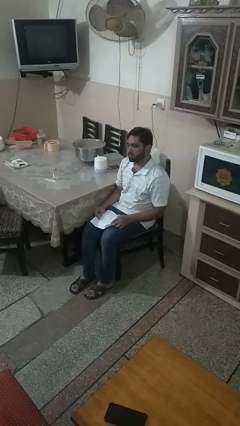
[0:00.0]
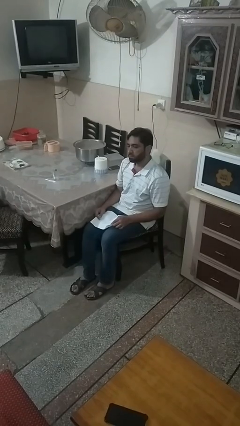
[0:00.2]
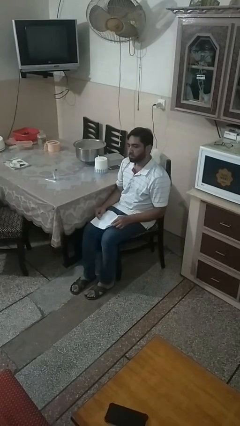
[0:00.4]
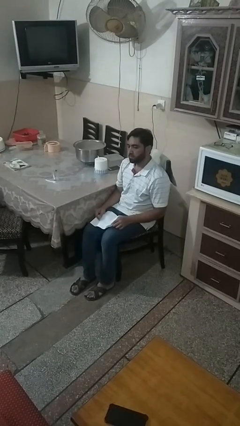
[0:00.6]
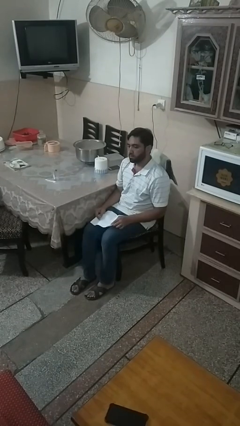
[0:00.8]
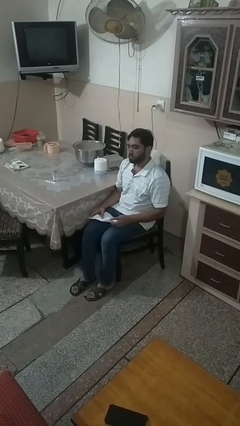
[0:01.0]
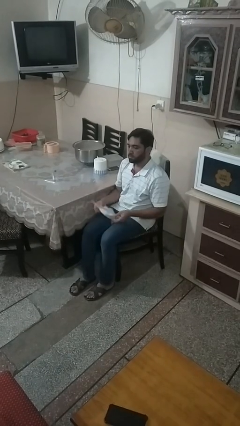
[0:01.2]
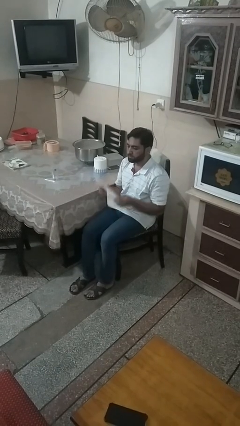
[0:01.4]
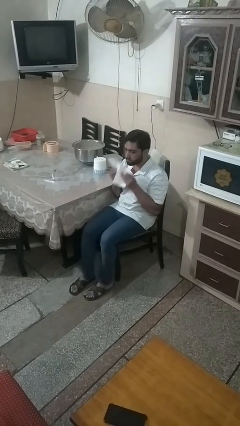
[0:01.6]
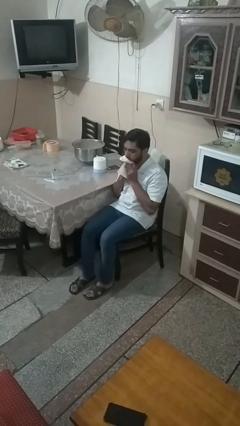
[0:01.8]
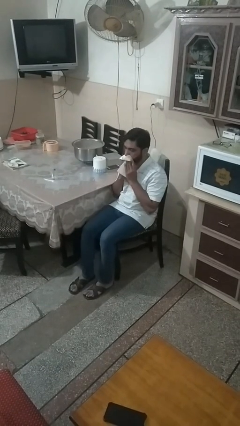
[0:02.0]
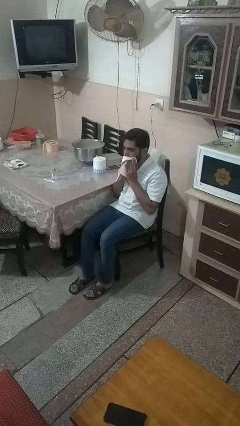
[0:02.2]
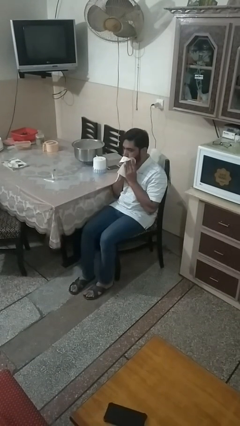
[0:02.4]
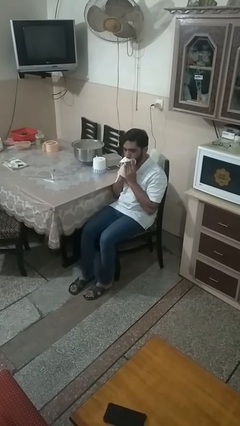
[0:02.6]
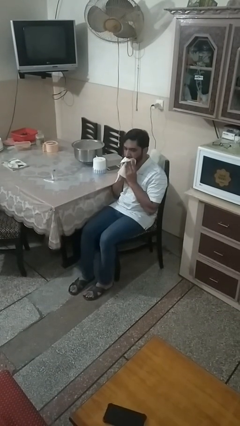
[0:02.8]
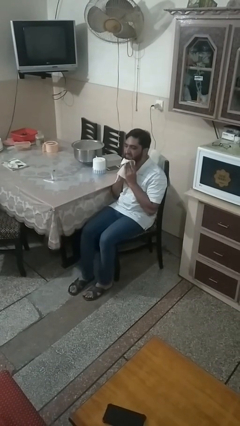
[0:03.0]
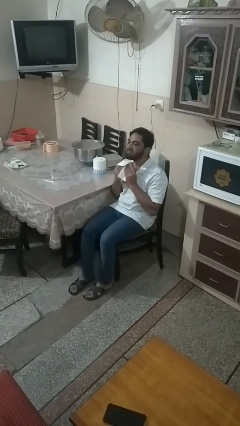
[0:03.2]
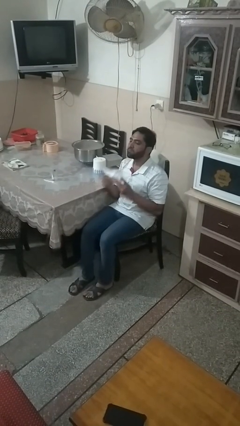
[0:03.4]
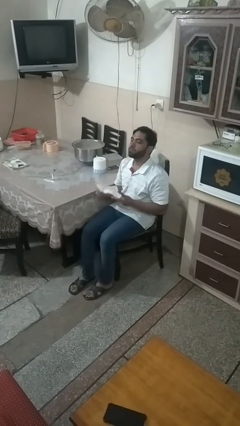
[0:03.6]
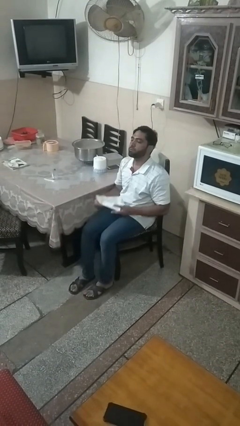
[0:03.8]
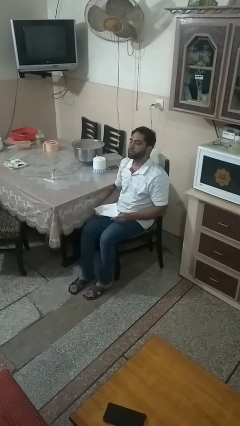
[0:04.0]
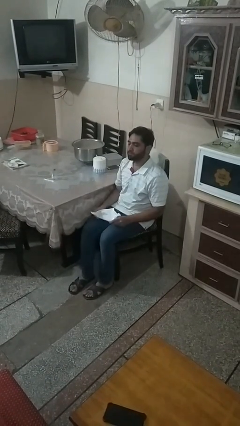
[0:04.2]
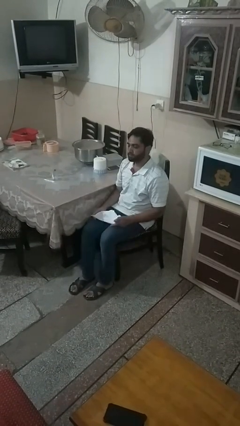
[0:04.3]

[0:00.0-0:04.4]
person wipes mouth with napkin

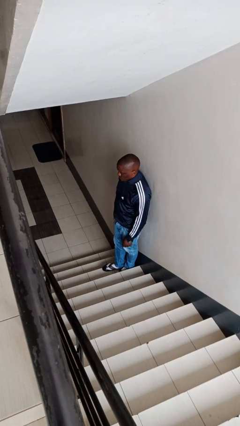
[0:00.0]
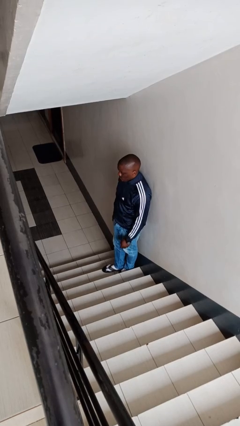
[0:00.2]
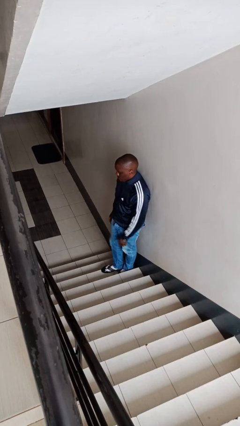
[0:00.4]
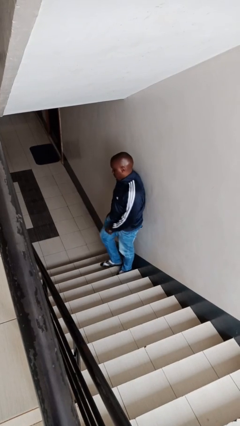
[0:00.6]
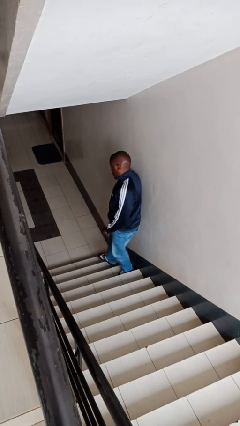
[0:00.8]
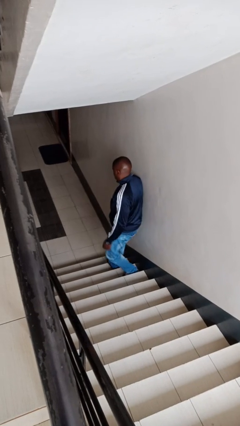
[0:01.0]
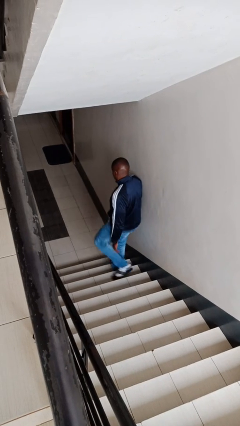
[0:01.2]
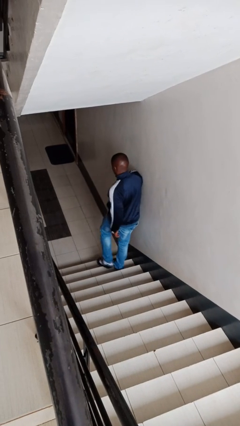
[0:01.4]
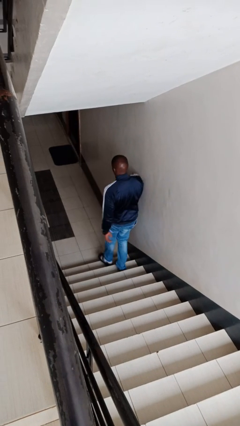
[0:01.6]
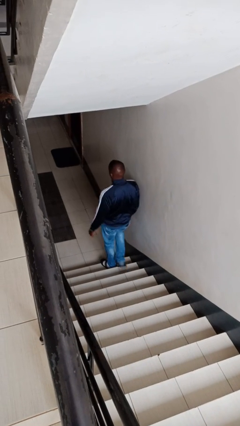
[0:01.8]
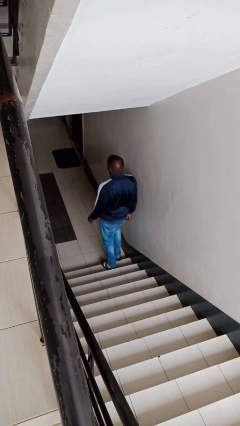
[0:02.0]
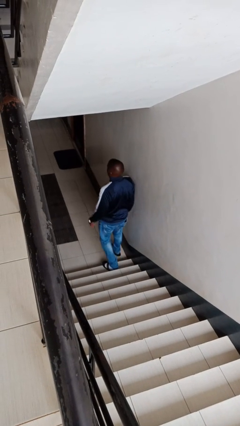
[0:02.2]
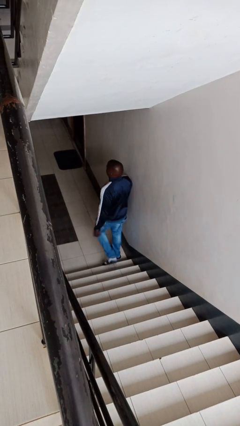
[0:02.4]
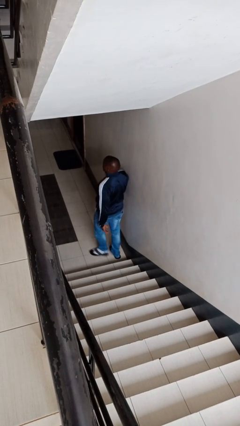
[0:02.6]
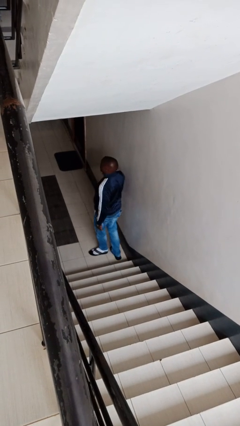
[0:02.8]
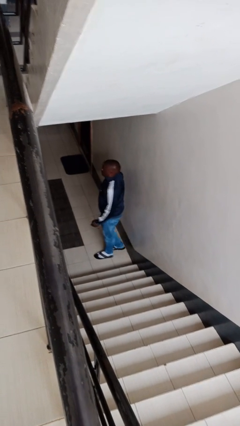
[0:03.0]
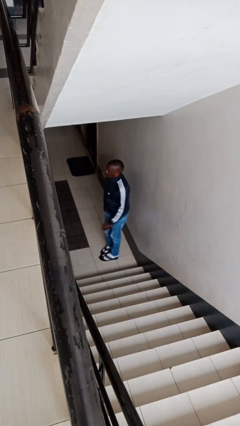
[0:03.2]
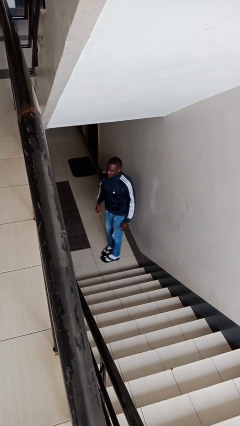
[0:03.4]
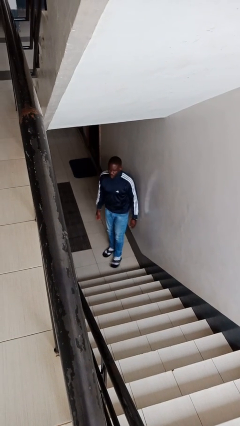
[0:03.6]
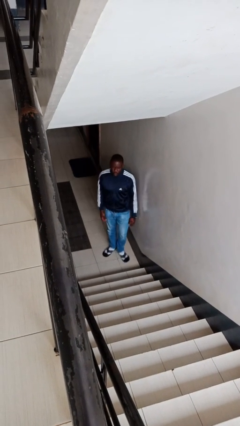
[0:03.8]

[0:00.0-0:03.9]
person climbs down stairs

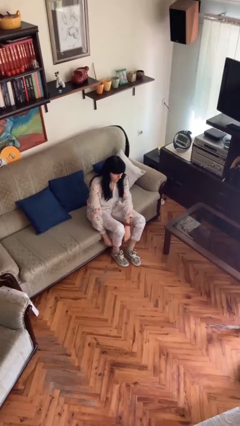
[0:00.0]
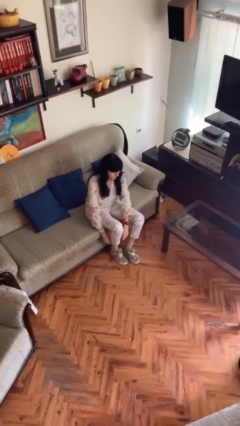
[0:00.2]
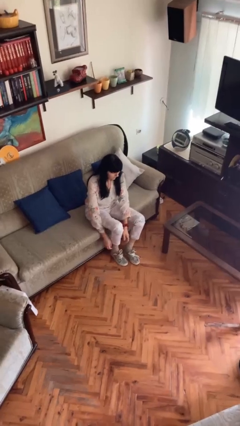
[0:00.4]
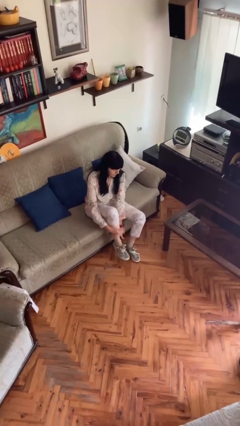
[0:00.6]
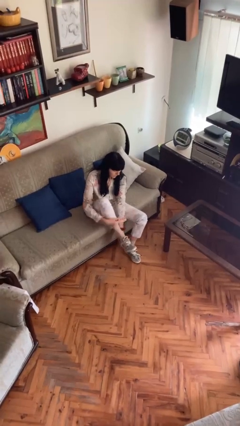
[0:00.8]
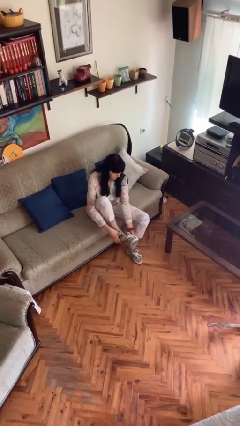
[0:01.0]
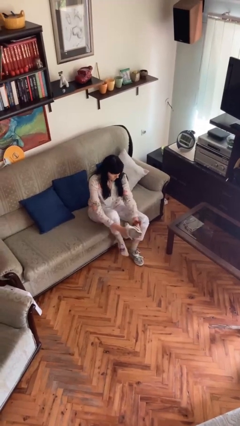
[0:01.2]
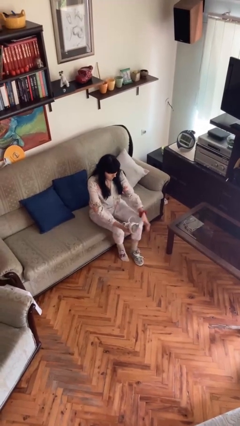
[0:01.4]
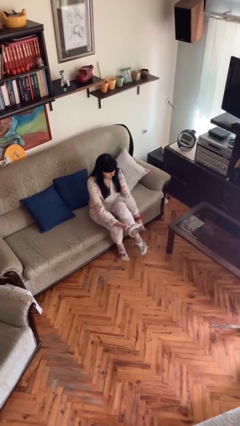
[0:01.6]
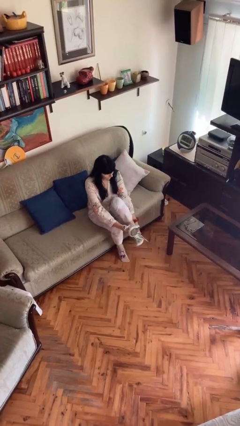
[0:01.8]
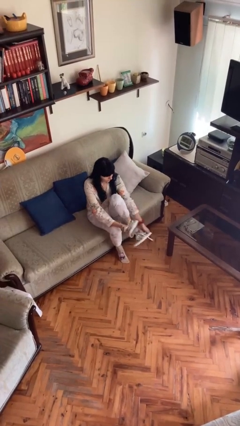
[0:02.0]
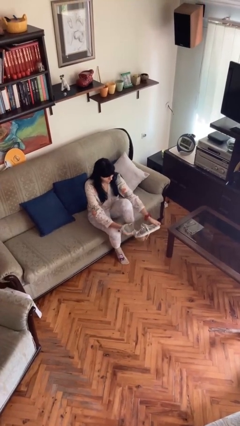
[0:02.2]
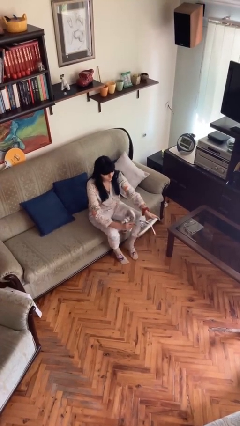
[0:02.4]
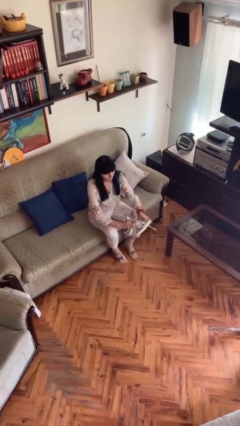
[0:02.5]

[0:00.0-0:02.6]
person takes off shoes

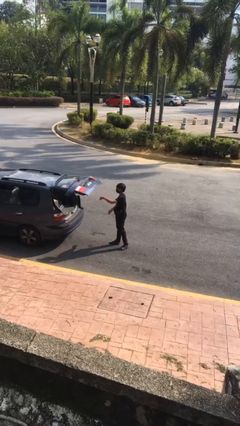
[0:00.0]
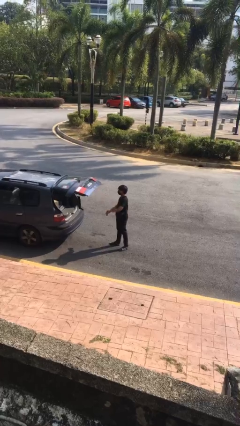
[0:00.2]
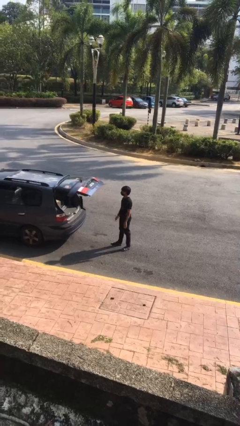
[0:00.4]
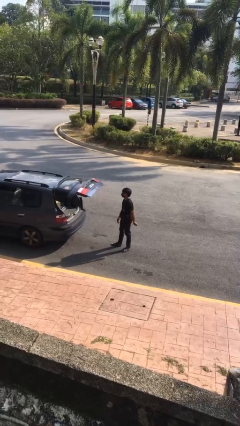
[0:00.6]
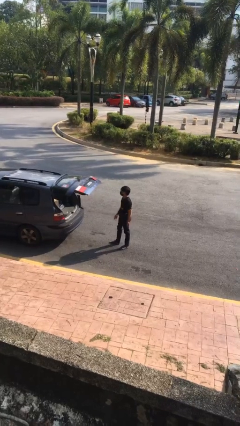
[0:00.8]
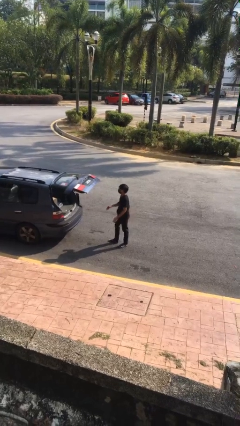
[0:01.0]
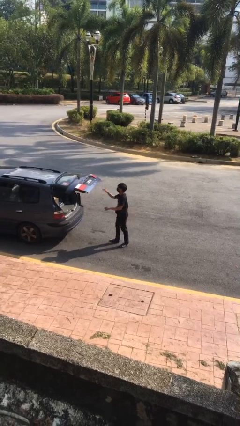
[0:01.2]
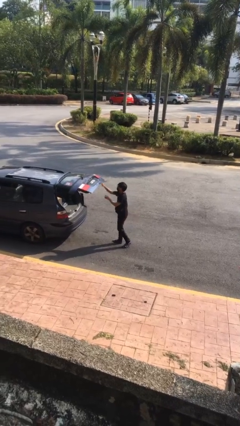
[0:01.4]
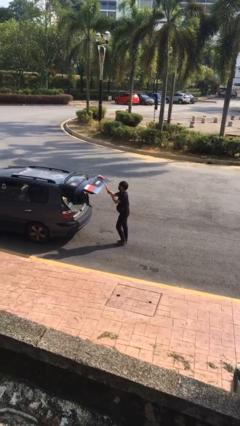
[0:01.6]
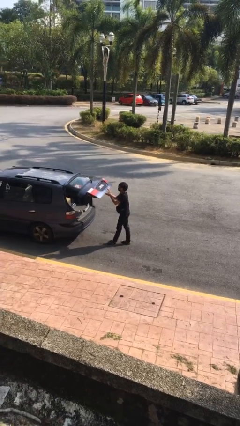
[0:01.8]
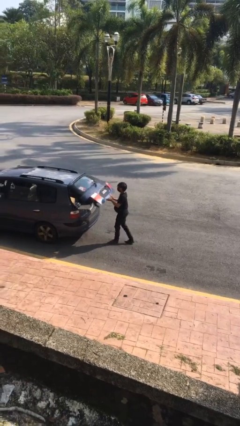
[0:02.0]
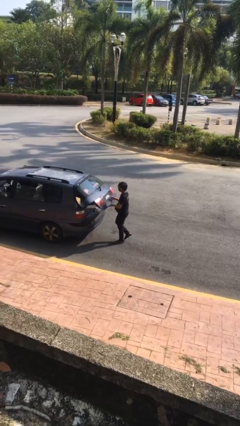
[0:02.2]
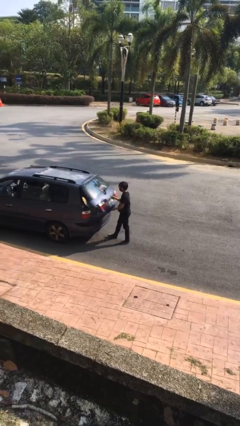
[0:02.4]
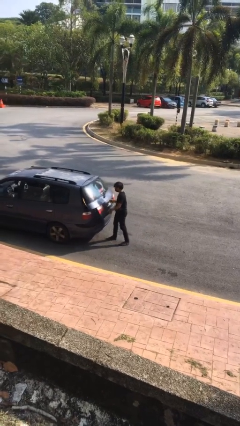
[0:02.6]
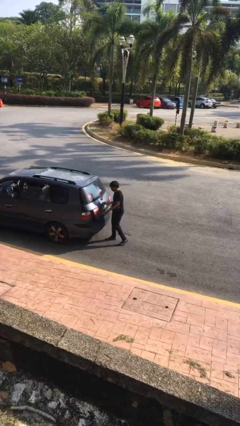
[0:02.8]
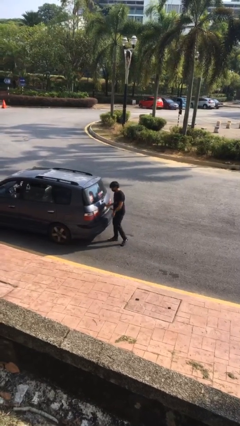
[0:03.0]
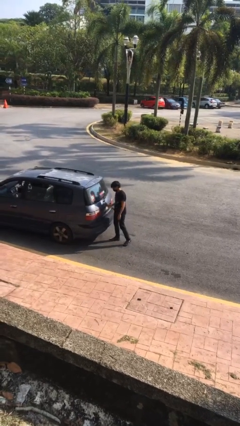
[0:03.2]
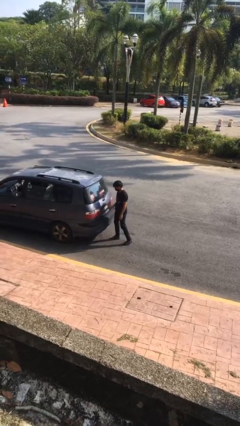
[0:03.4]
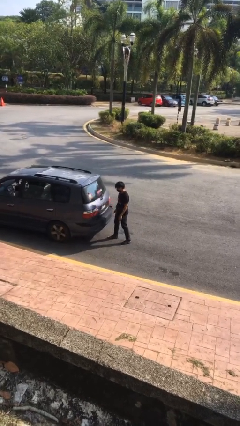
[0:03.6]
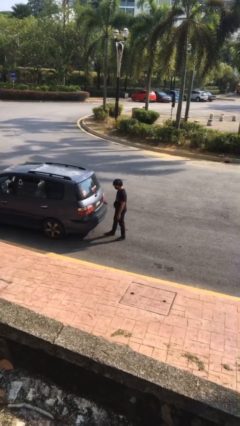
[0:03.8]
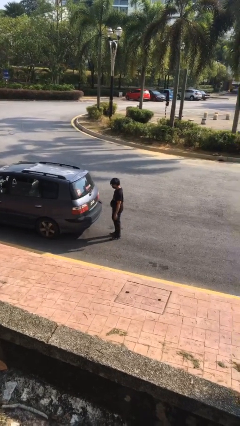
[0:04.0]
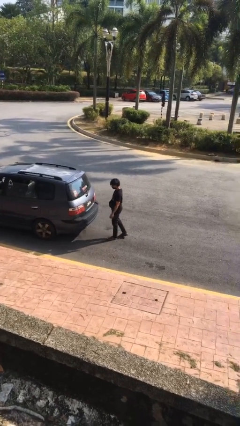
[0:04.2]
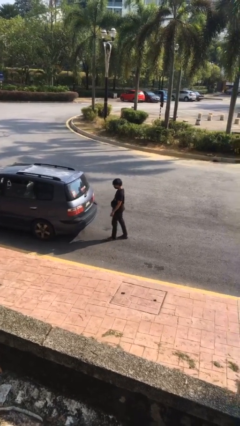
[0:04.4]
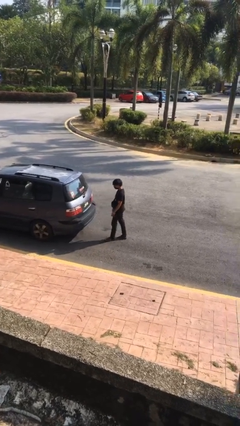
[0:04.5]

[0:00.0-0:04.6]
person closes car trunk

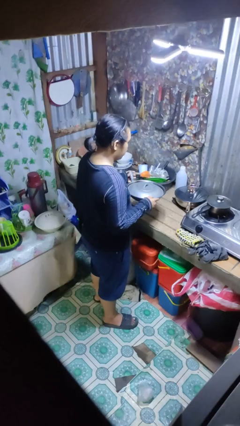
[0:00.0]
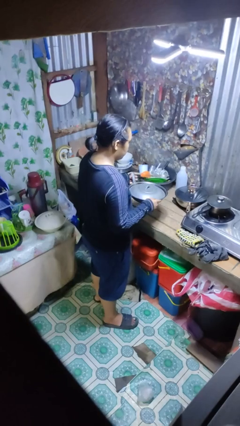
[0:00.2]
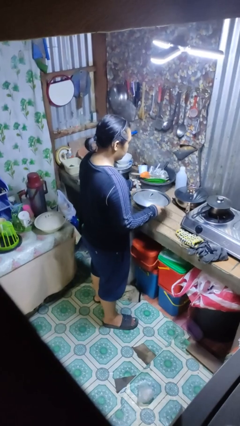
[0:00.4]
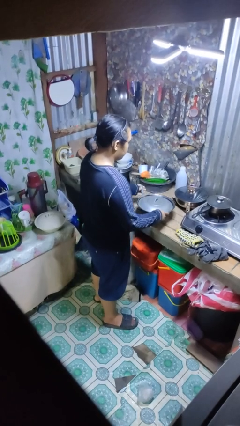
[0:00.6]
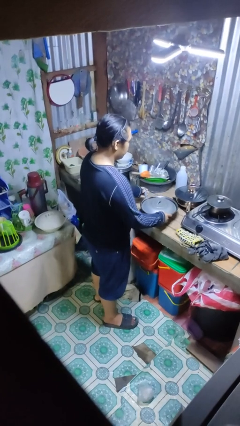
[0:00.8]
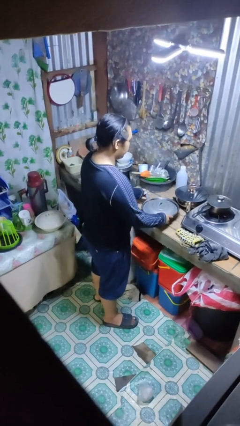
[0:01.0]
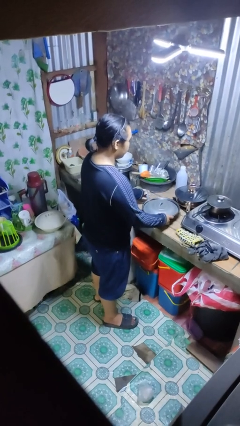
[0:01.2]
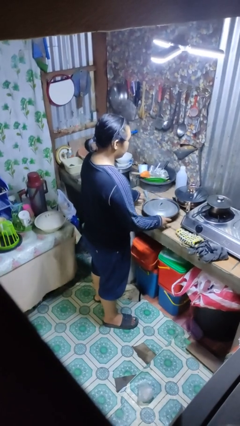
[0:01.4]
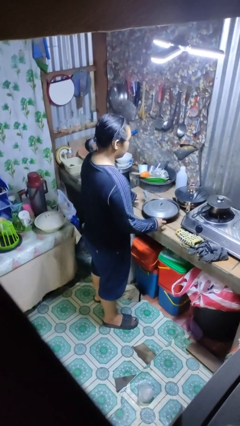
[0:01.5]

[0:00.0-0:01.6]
person puts down object on countertop

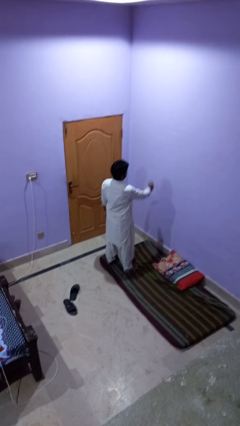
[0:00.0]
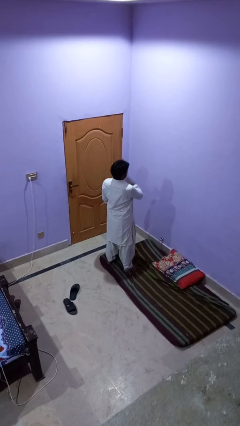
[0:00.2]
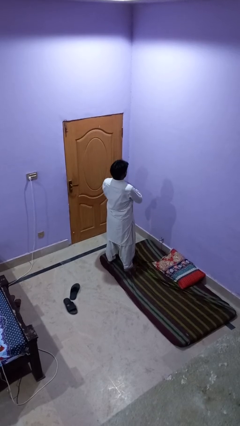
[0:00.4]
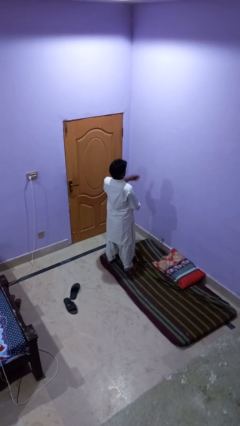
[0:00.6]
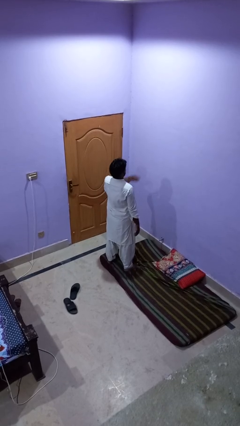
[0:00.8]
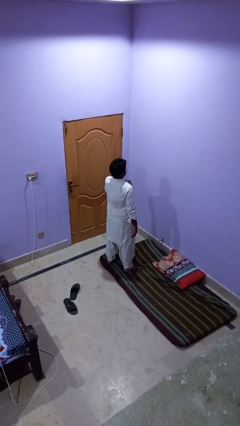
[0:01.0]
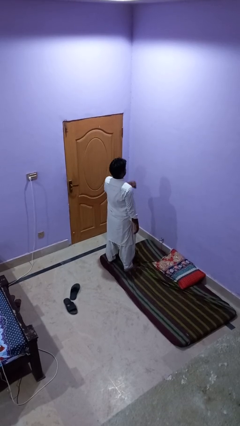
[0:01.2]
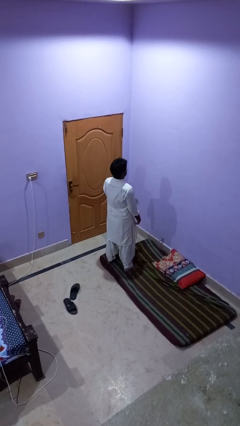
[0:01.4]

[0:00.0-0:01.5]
person drums on chest
